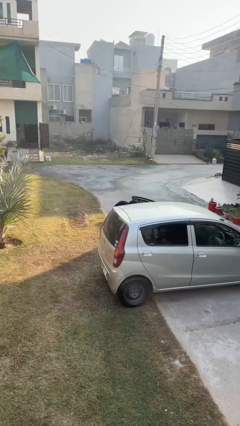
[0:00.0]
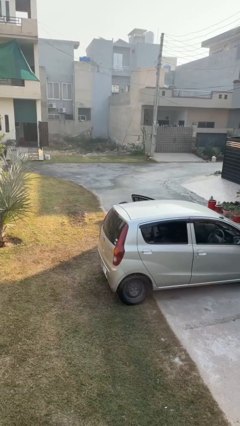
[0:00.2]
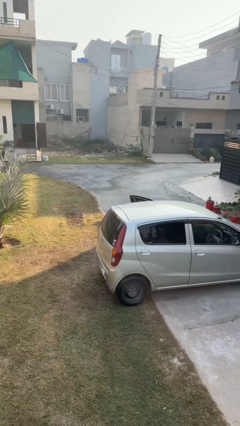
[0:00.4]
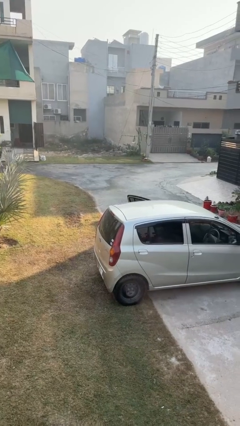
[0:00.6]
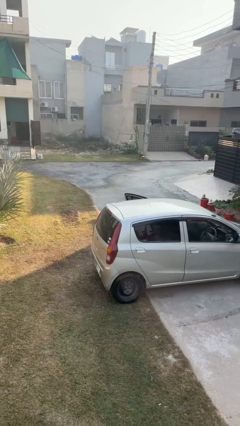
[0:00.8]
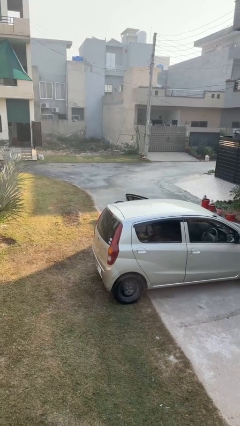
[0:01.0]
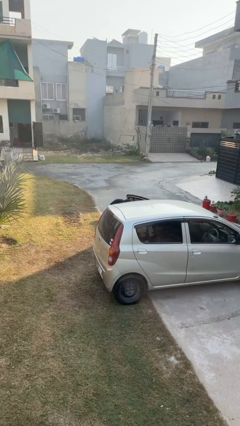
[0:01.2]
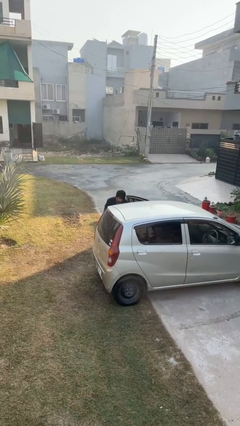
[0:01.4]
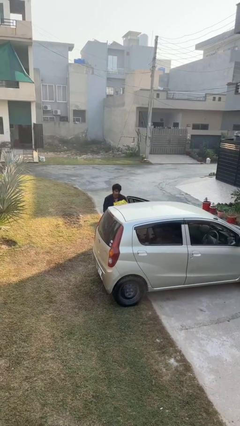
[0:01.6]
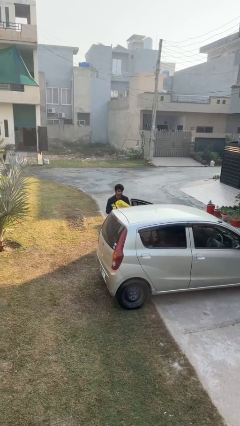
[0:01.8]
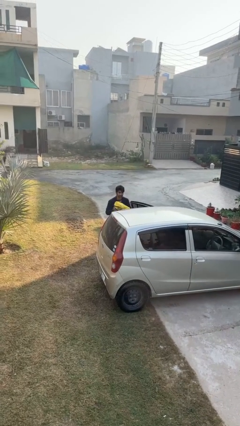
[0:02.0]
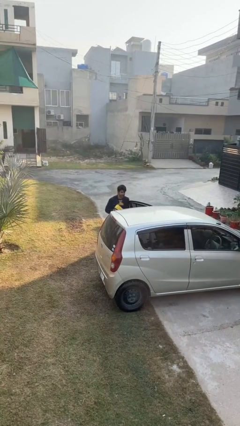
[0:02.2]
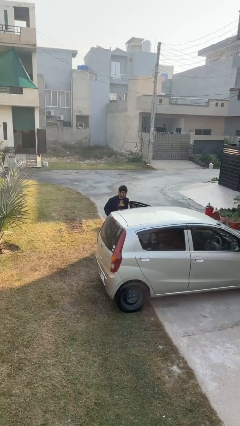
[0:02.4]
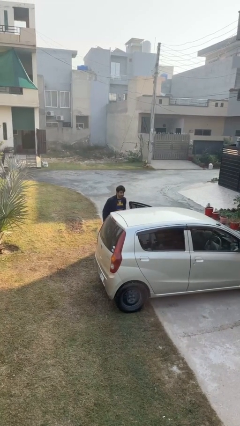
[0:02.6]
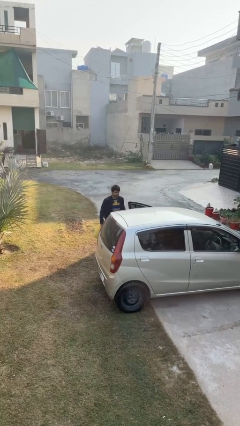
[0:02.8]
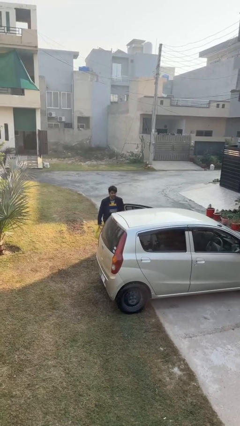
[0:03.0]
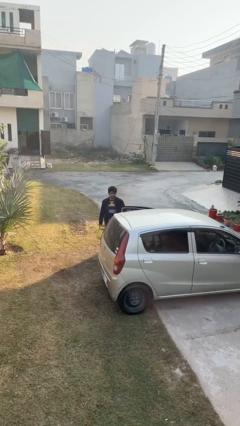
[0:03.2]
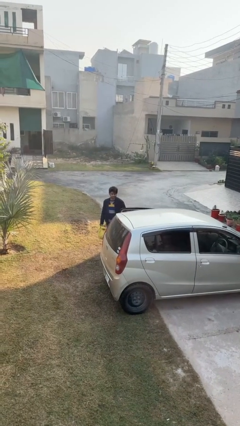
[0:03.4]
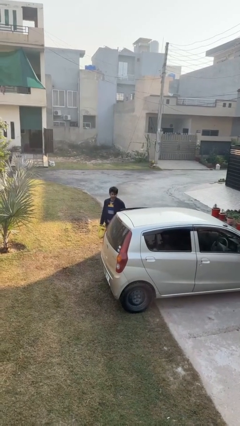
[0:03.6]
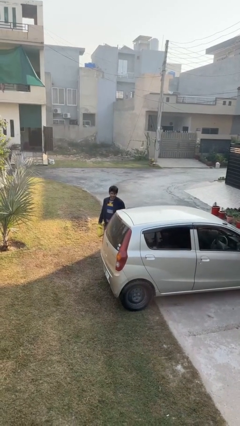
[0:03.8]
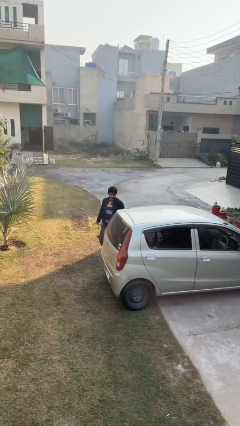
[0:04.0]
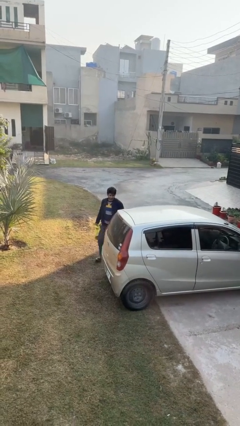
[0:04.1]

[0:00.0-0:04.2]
person unloads car

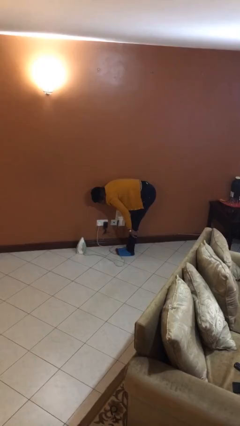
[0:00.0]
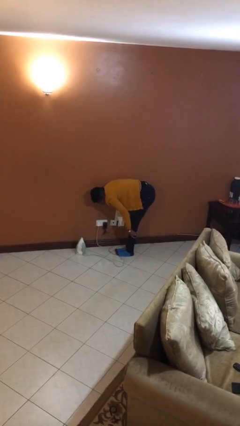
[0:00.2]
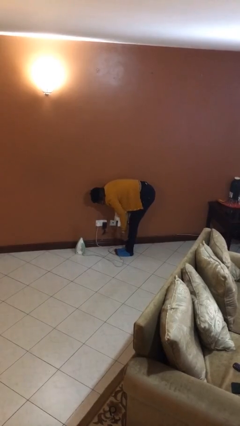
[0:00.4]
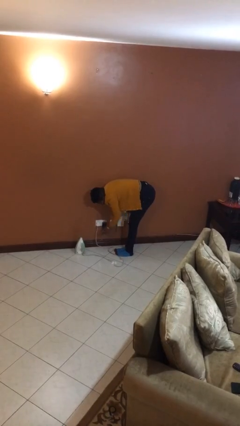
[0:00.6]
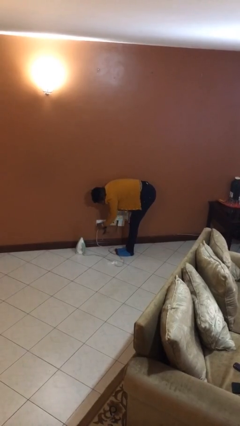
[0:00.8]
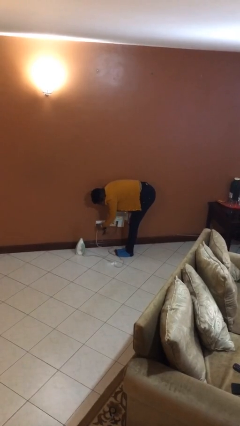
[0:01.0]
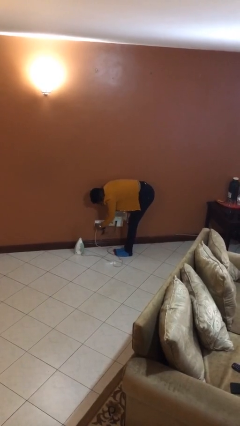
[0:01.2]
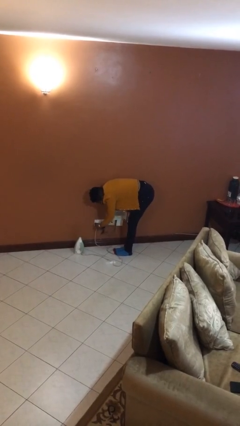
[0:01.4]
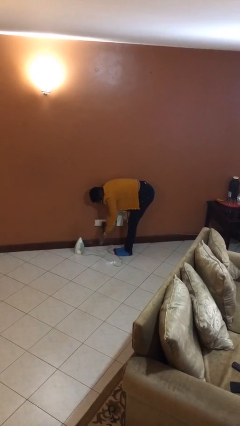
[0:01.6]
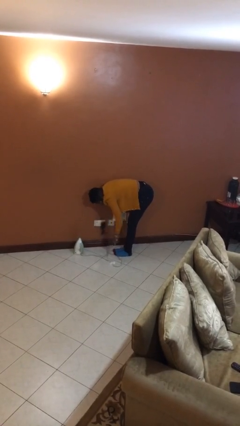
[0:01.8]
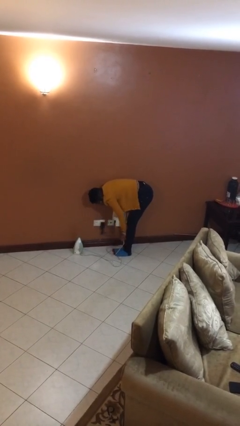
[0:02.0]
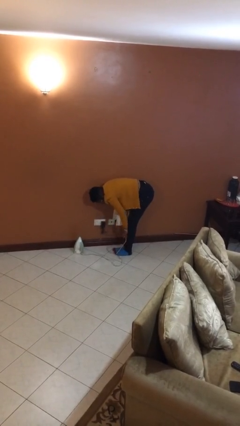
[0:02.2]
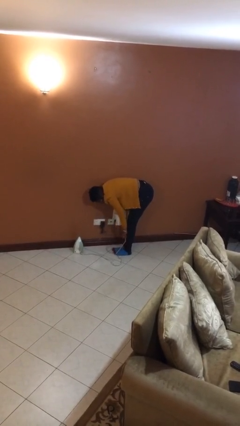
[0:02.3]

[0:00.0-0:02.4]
person unplugs from electrical socket

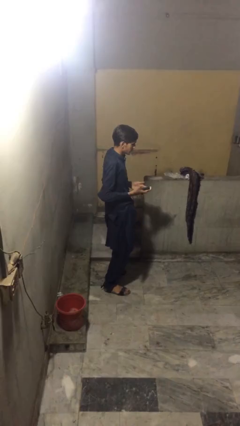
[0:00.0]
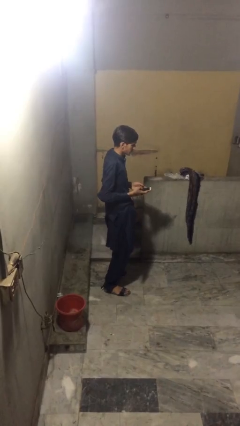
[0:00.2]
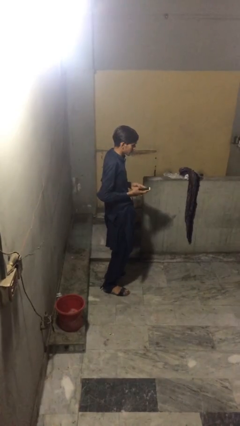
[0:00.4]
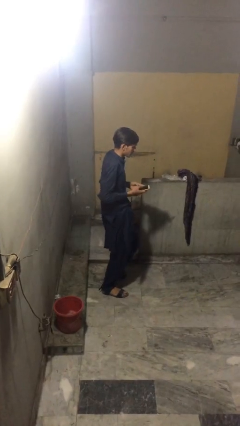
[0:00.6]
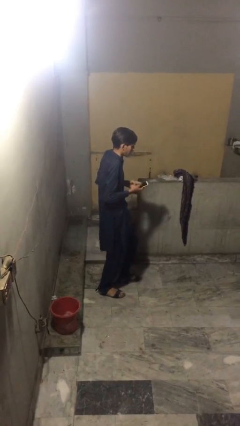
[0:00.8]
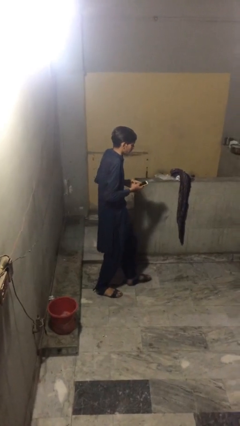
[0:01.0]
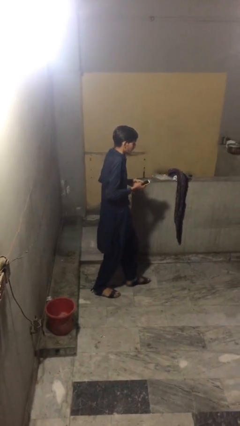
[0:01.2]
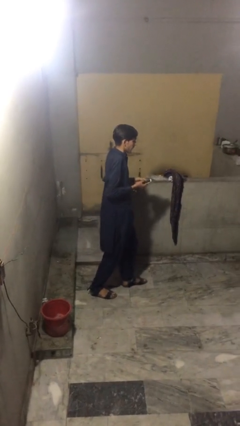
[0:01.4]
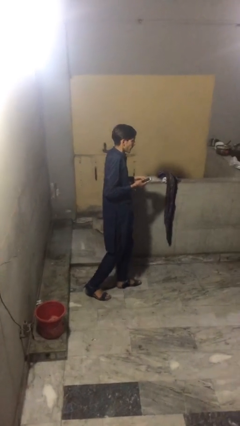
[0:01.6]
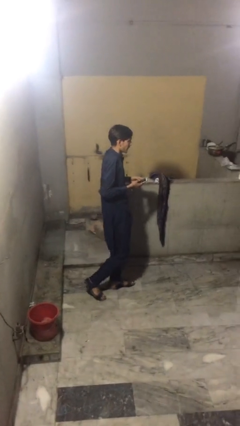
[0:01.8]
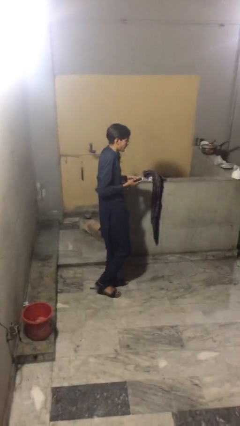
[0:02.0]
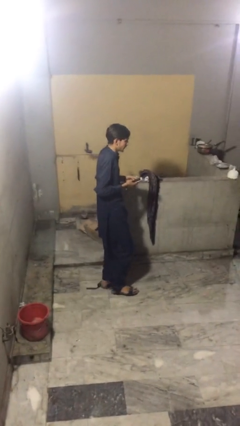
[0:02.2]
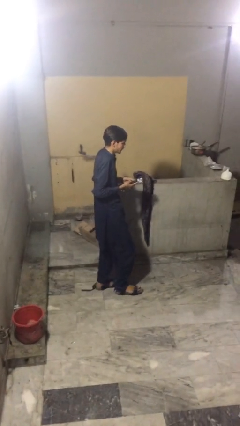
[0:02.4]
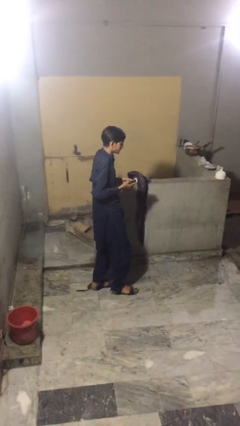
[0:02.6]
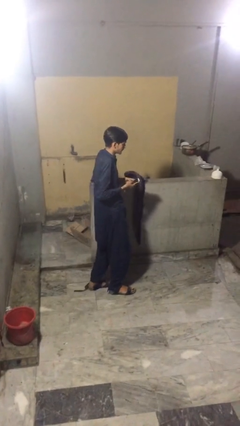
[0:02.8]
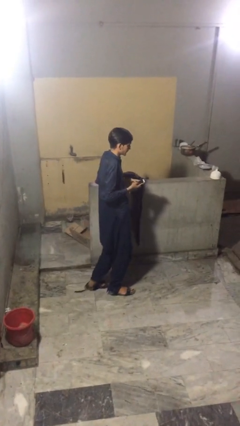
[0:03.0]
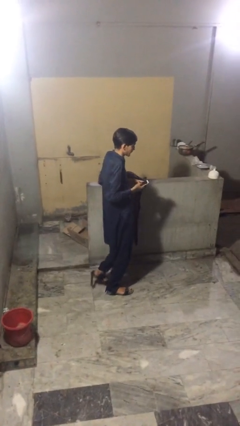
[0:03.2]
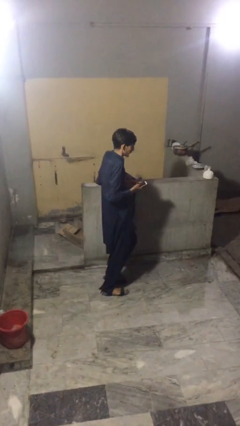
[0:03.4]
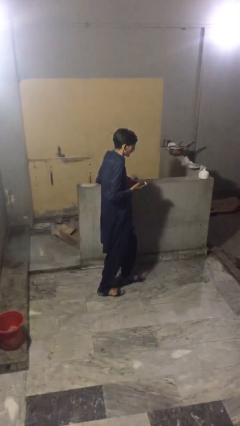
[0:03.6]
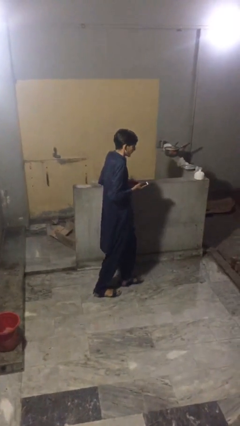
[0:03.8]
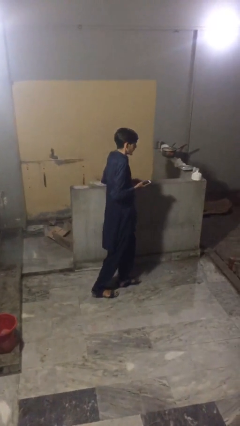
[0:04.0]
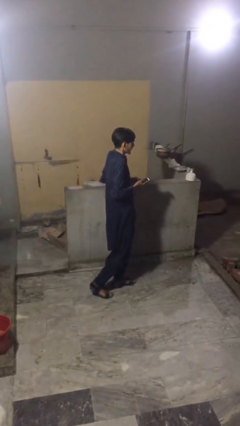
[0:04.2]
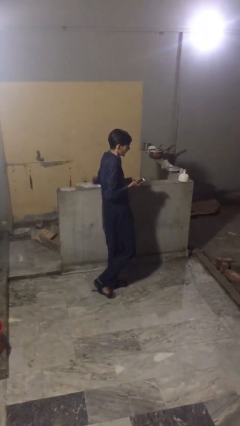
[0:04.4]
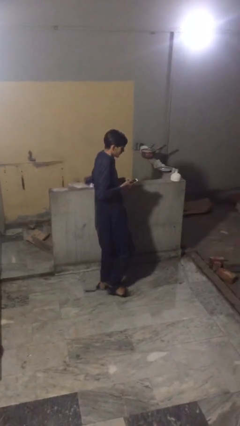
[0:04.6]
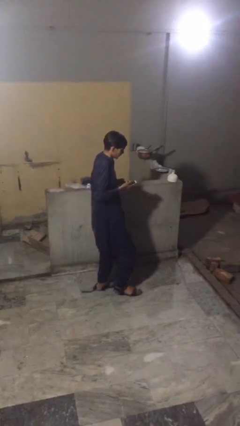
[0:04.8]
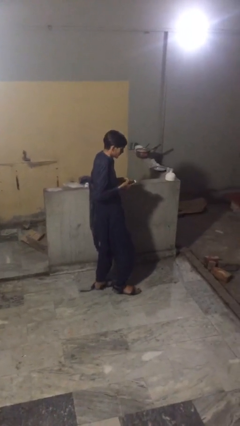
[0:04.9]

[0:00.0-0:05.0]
person texts on phone

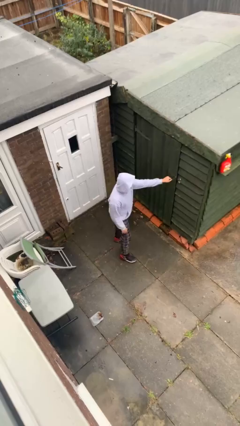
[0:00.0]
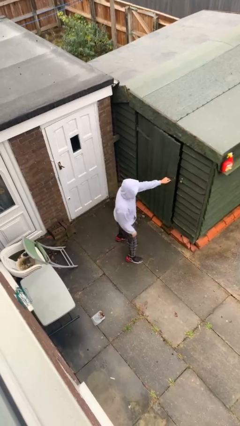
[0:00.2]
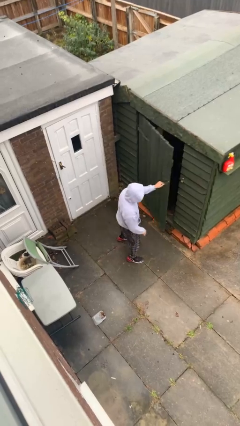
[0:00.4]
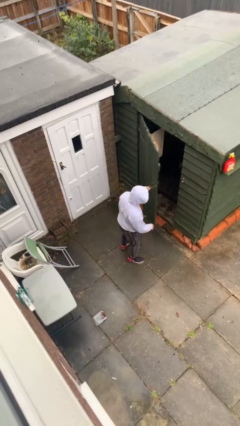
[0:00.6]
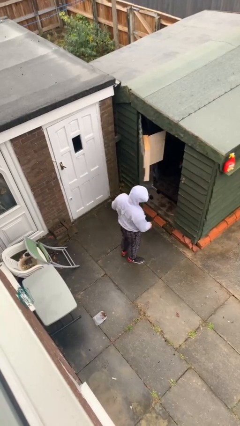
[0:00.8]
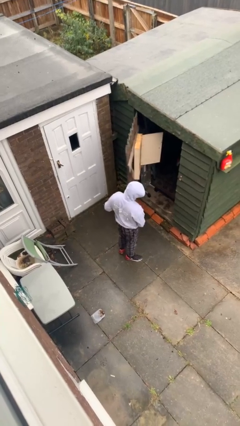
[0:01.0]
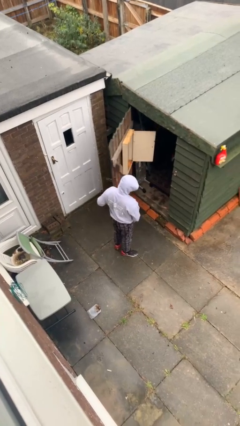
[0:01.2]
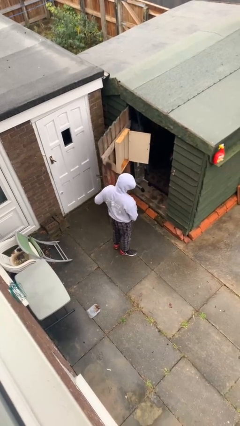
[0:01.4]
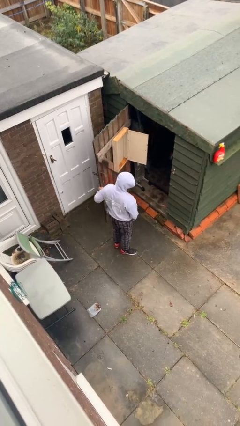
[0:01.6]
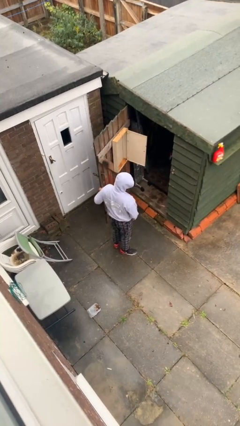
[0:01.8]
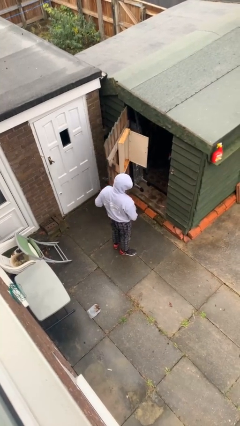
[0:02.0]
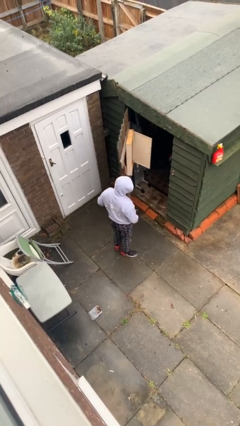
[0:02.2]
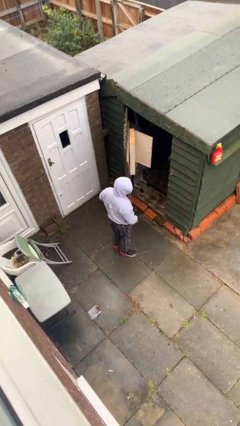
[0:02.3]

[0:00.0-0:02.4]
person opens facility door

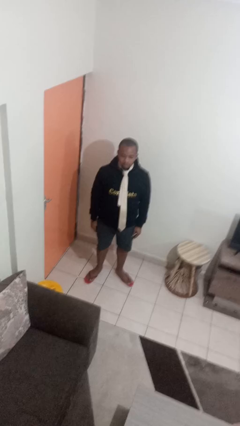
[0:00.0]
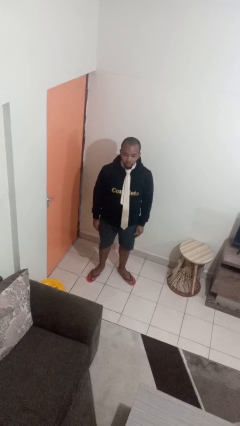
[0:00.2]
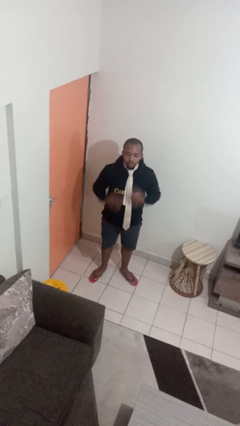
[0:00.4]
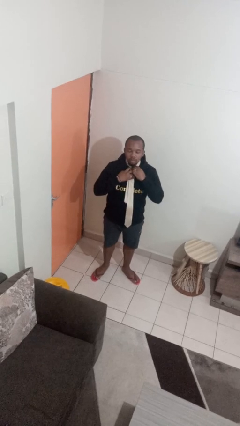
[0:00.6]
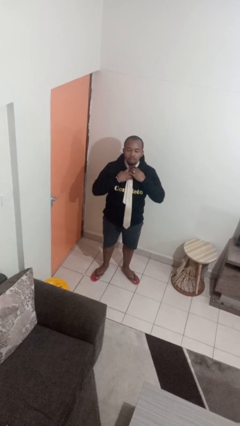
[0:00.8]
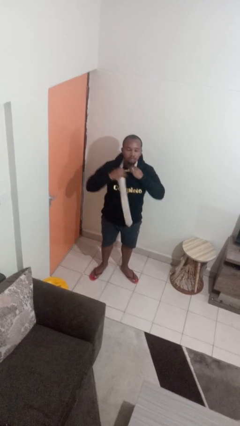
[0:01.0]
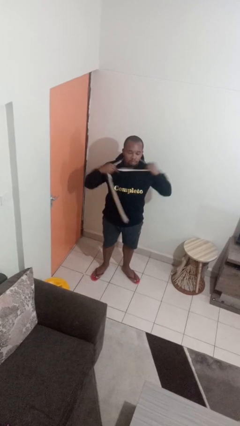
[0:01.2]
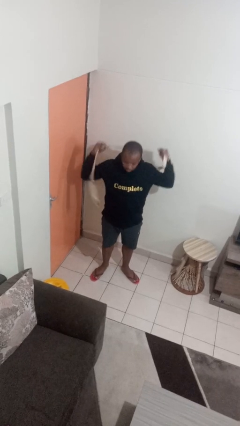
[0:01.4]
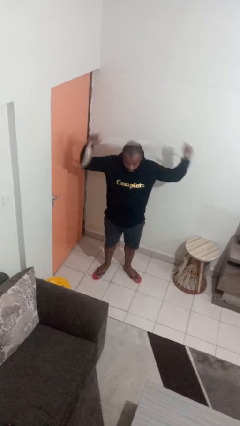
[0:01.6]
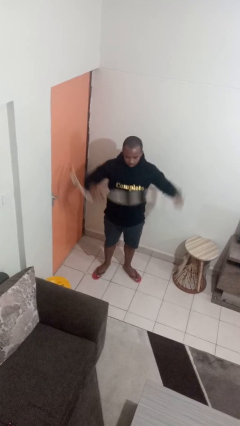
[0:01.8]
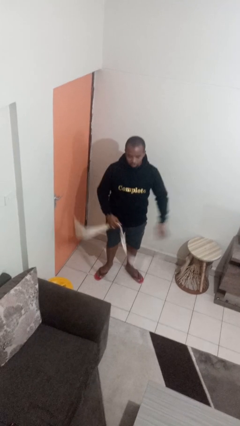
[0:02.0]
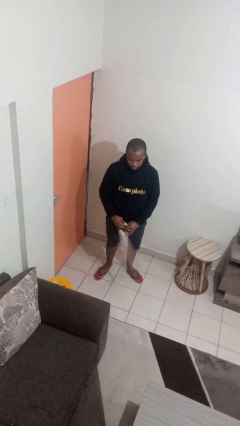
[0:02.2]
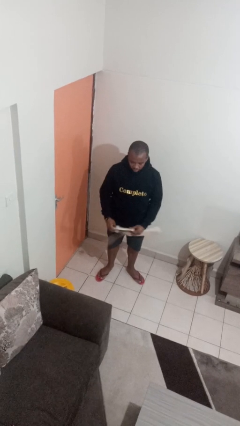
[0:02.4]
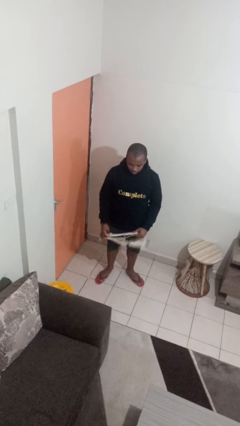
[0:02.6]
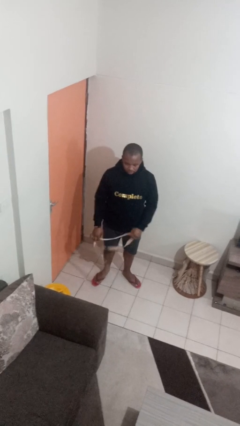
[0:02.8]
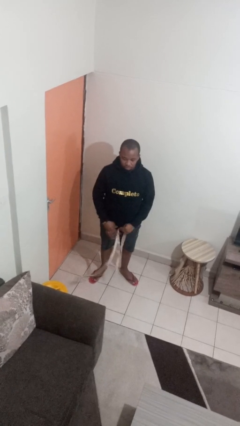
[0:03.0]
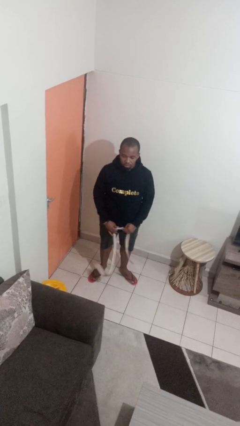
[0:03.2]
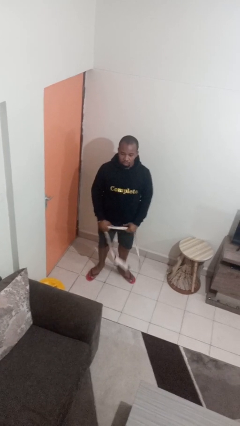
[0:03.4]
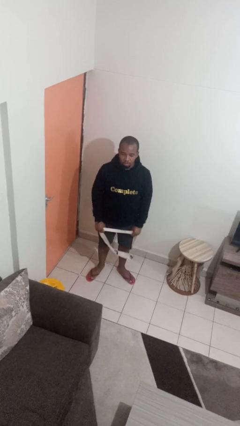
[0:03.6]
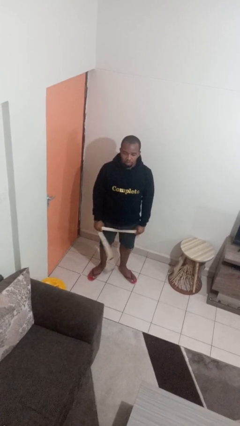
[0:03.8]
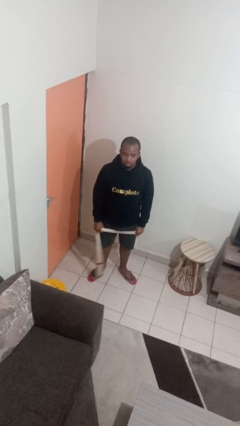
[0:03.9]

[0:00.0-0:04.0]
person takes off necktie
